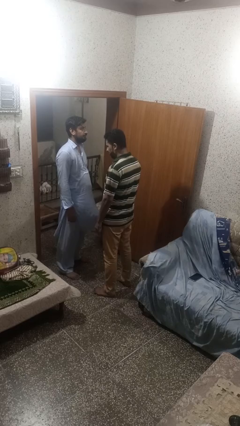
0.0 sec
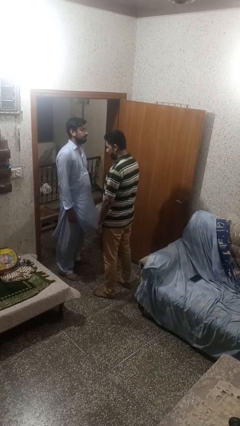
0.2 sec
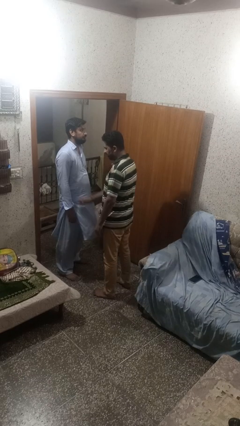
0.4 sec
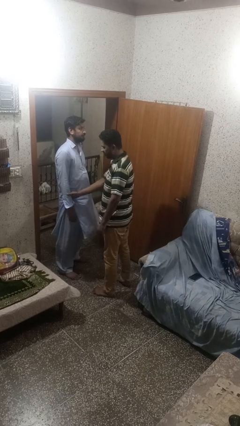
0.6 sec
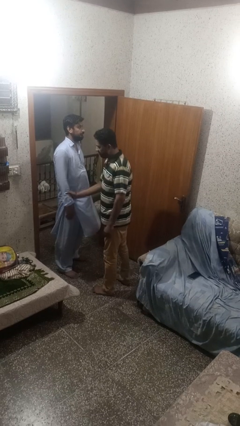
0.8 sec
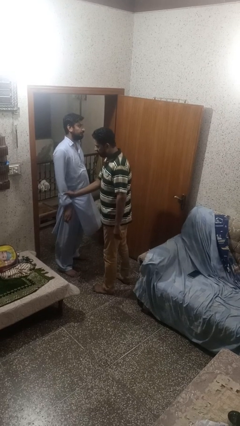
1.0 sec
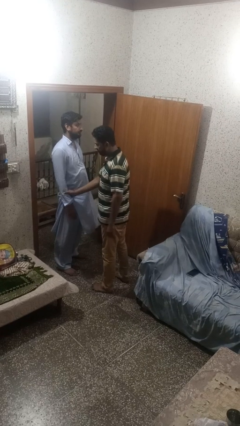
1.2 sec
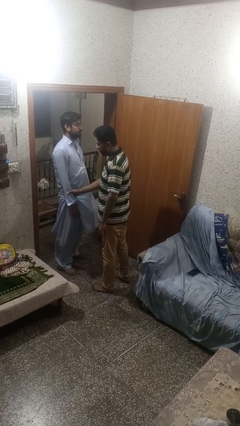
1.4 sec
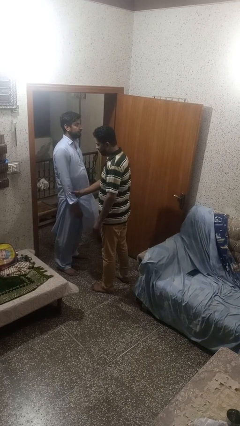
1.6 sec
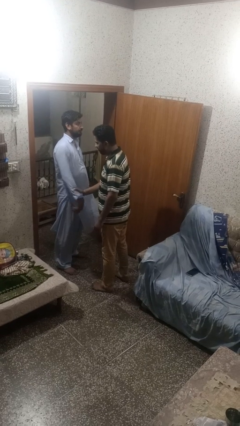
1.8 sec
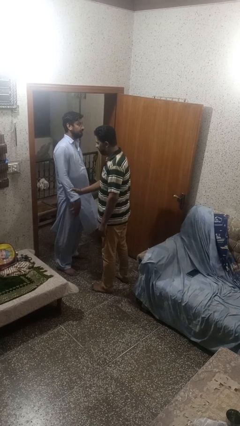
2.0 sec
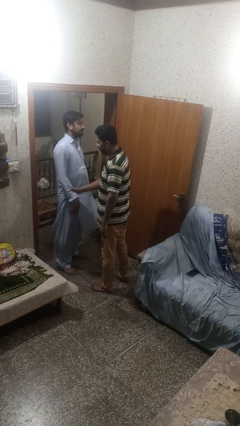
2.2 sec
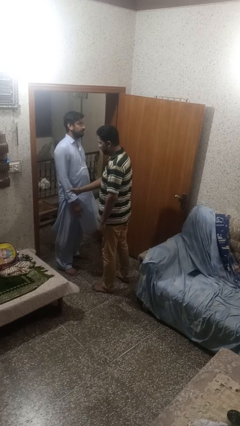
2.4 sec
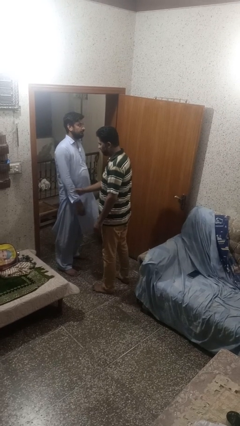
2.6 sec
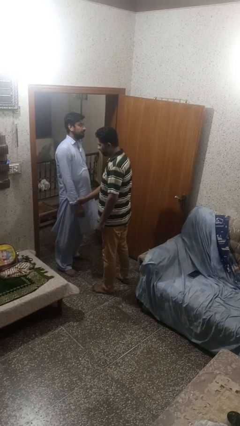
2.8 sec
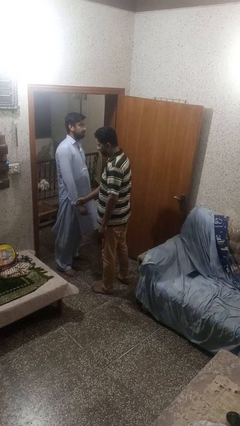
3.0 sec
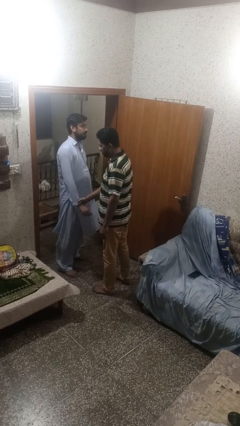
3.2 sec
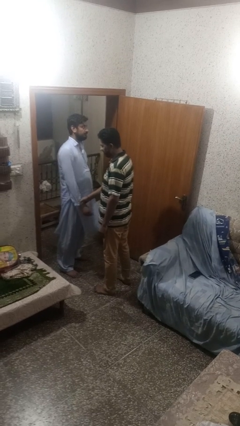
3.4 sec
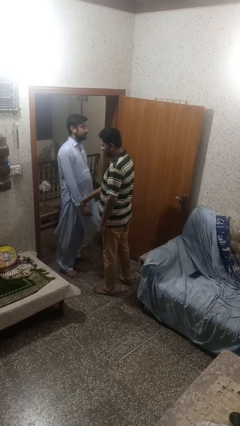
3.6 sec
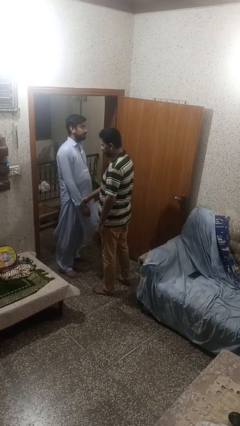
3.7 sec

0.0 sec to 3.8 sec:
person grabs person by forearm

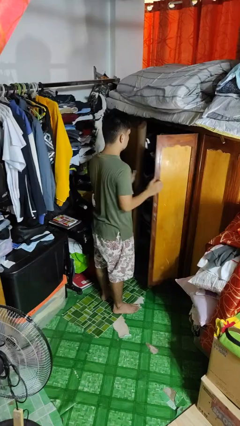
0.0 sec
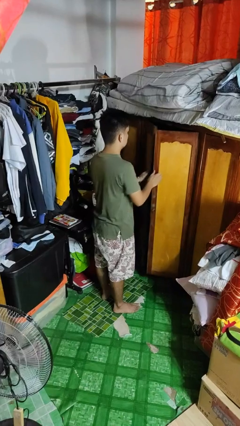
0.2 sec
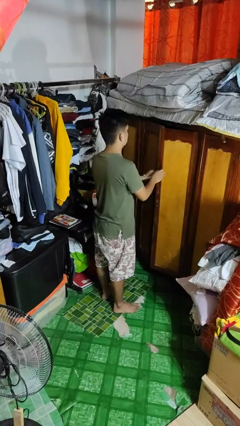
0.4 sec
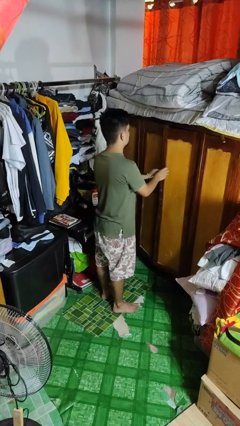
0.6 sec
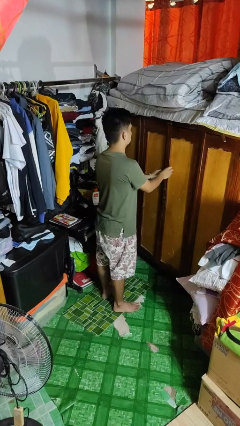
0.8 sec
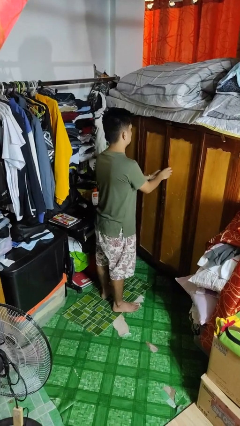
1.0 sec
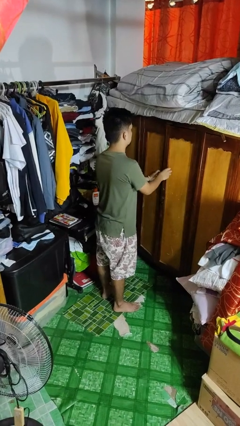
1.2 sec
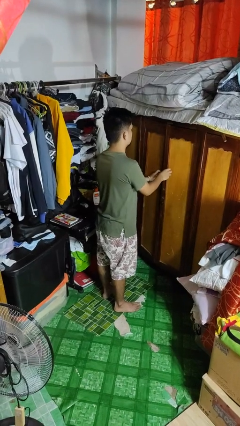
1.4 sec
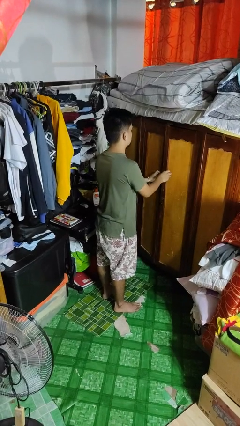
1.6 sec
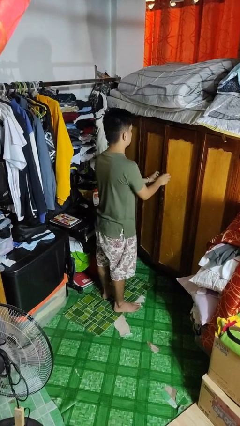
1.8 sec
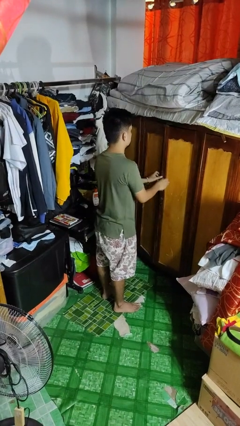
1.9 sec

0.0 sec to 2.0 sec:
person closes closet door

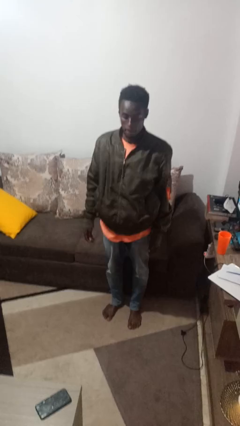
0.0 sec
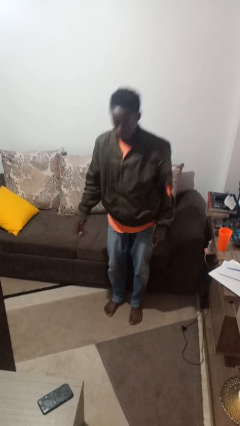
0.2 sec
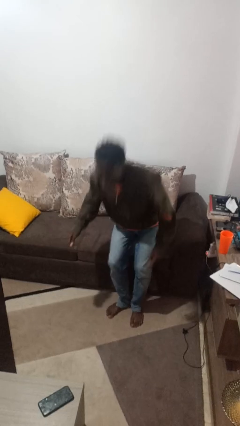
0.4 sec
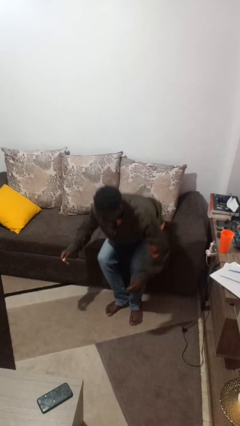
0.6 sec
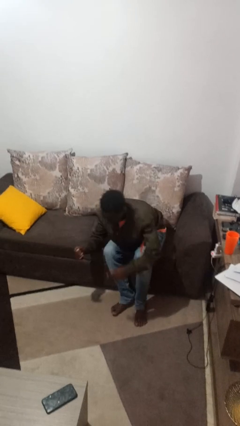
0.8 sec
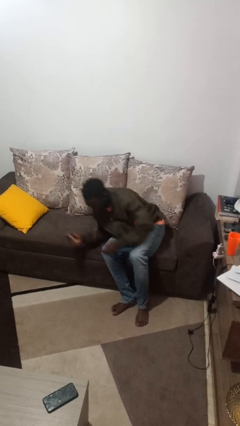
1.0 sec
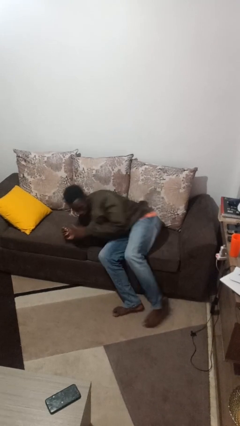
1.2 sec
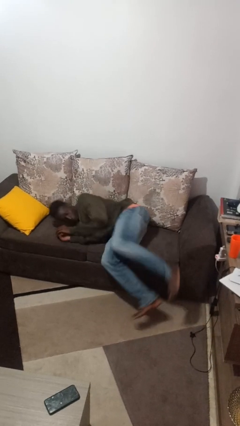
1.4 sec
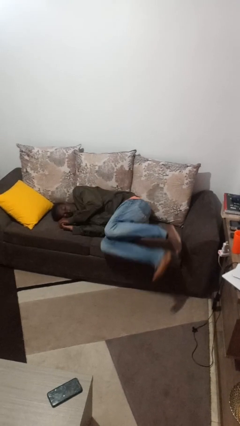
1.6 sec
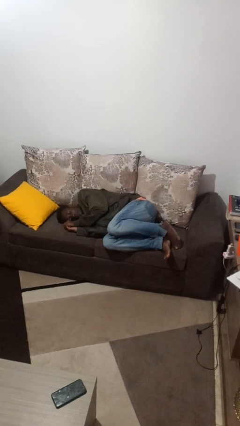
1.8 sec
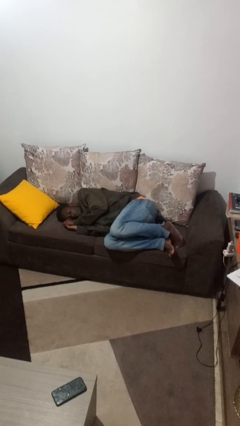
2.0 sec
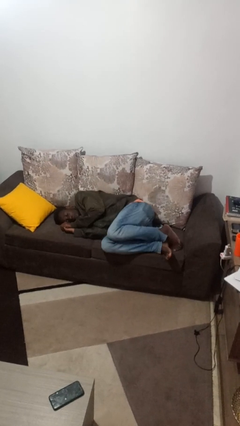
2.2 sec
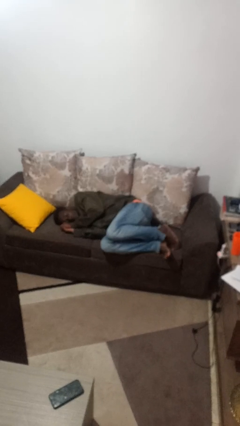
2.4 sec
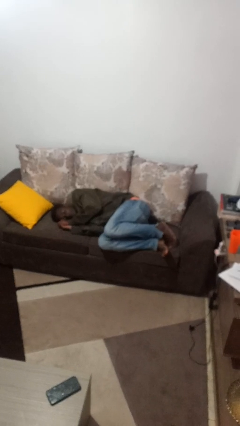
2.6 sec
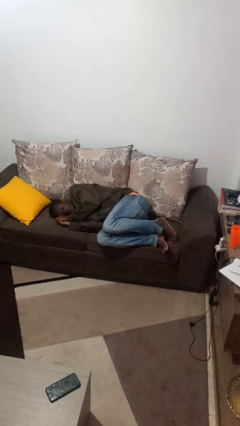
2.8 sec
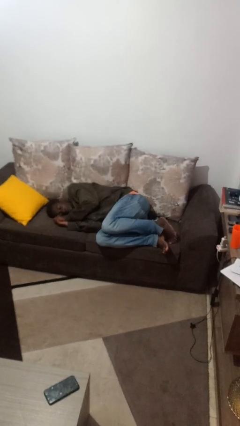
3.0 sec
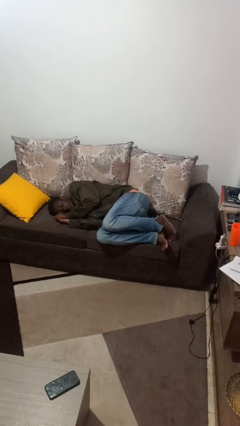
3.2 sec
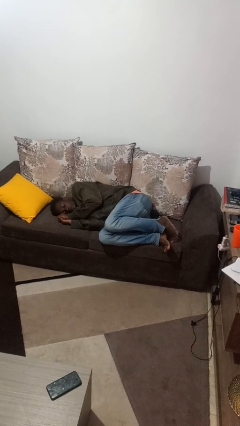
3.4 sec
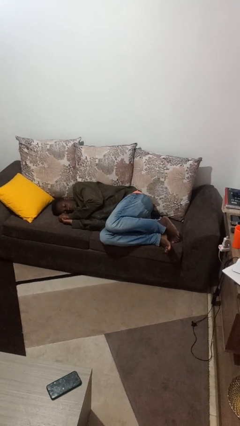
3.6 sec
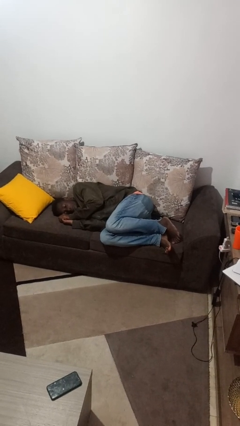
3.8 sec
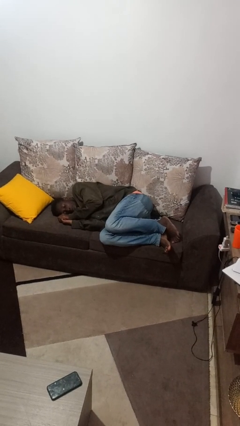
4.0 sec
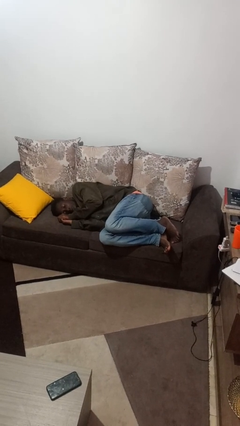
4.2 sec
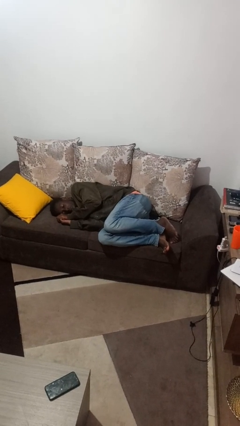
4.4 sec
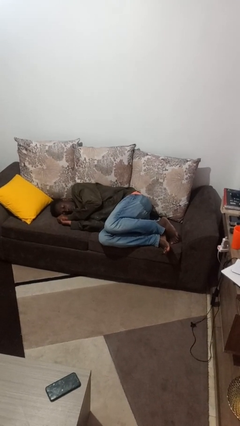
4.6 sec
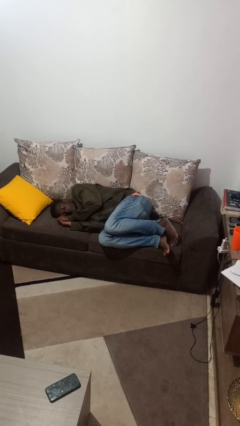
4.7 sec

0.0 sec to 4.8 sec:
person lies down on couch

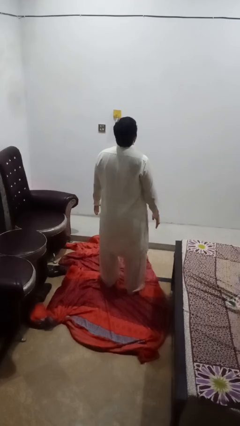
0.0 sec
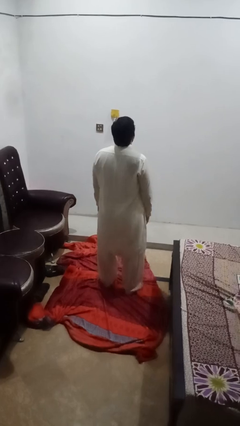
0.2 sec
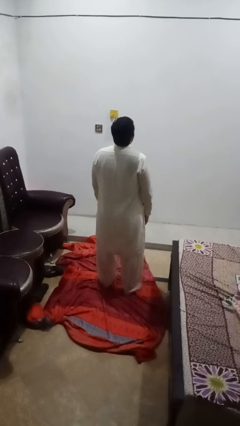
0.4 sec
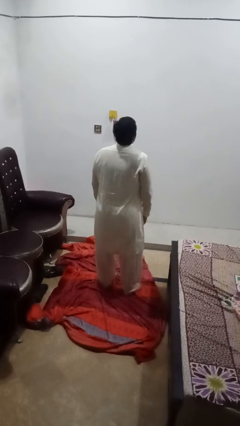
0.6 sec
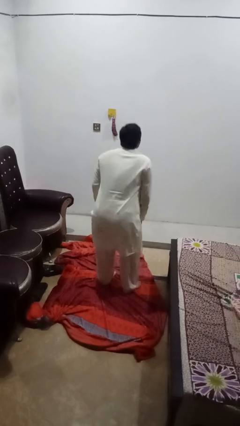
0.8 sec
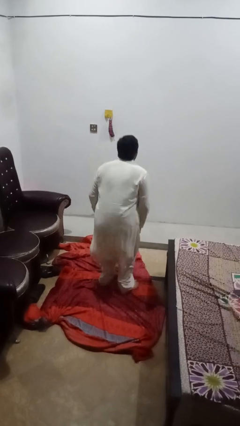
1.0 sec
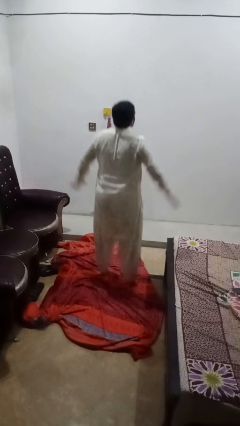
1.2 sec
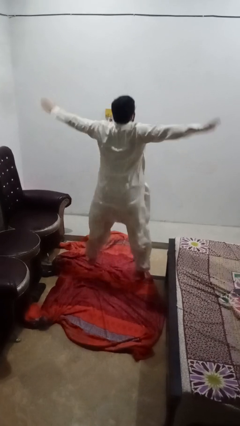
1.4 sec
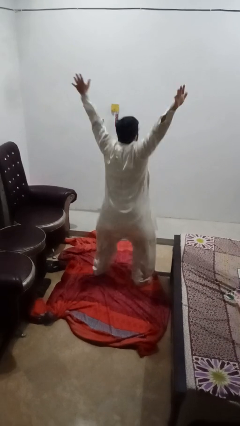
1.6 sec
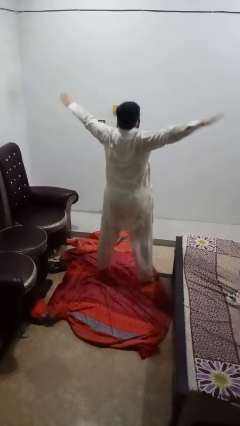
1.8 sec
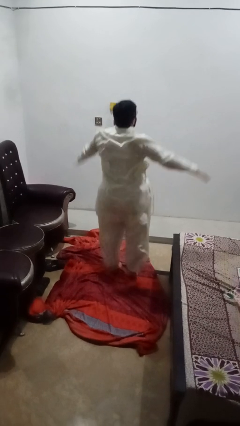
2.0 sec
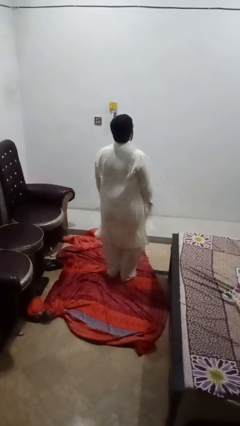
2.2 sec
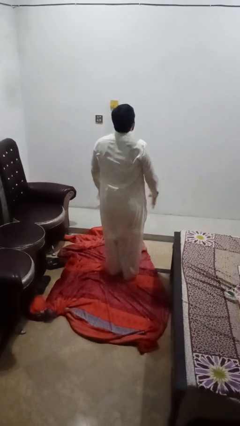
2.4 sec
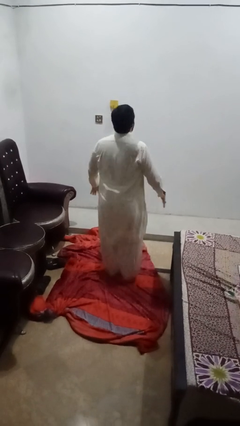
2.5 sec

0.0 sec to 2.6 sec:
person exercises with jumping jacks

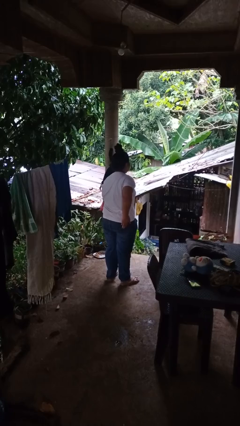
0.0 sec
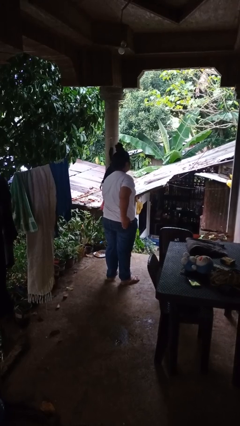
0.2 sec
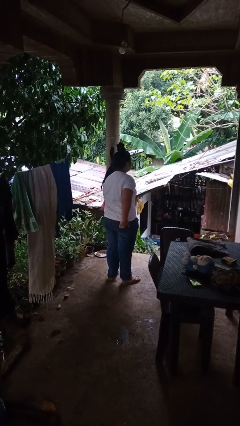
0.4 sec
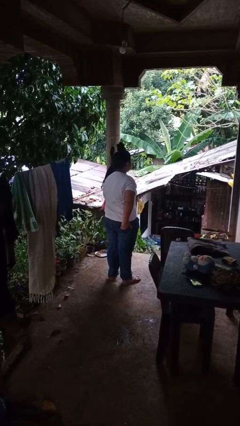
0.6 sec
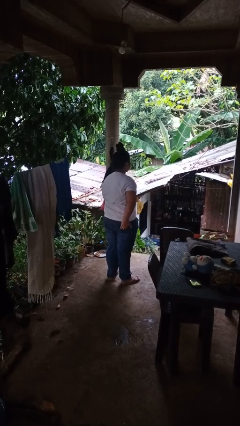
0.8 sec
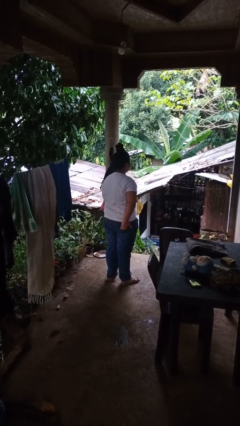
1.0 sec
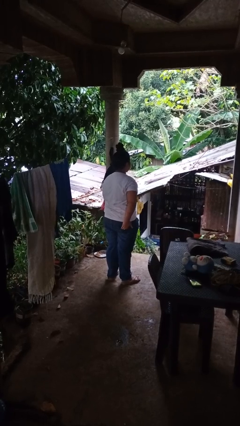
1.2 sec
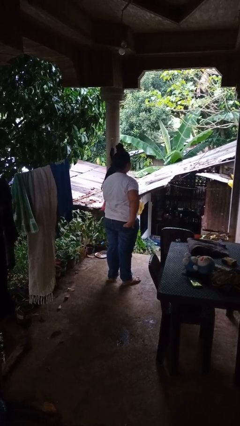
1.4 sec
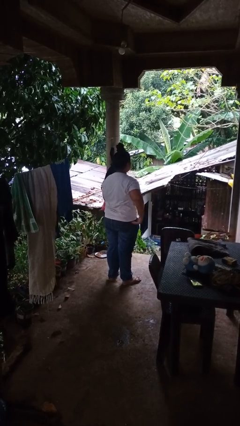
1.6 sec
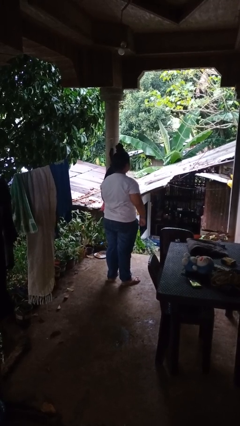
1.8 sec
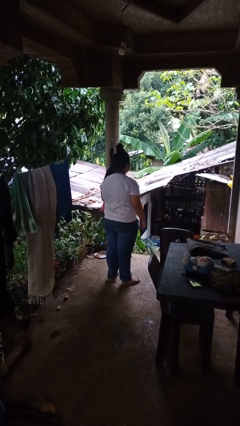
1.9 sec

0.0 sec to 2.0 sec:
person puts hands in back pockets

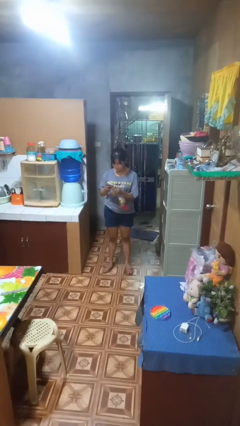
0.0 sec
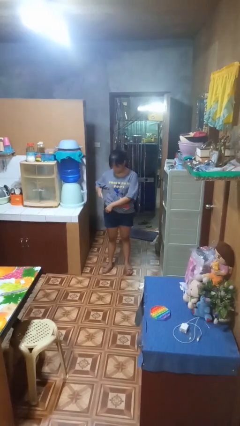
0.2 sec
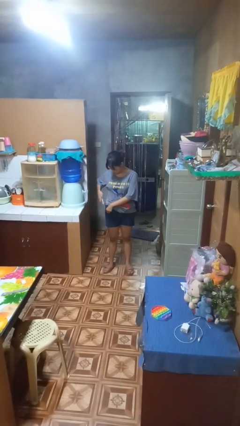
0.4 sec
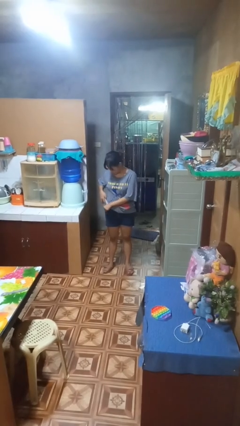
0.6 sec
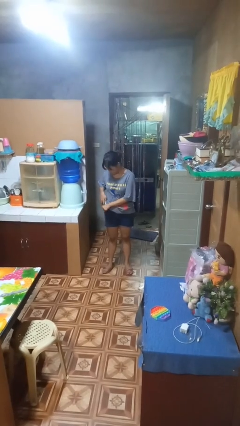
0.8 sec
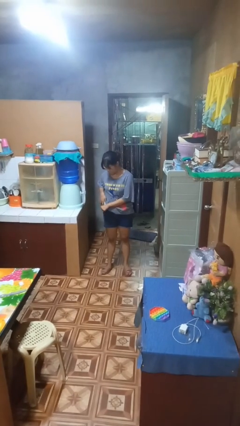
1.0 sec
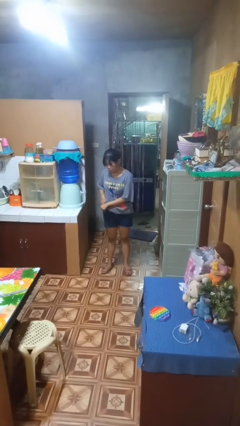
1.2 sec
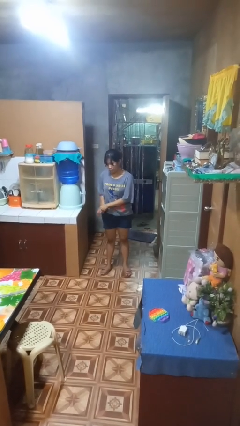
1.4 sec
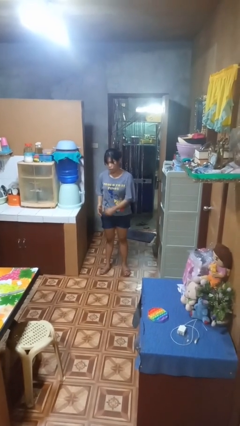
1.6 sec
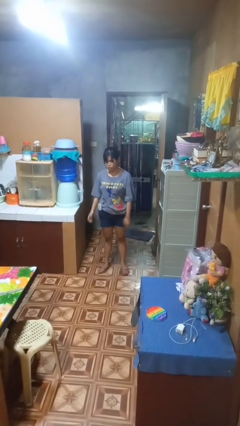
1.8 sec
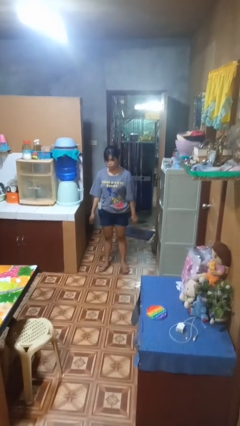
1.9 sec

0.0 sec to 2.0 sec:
person puts phone into pocket
